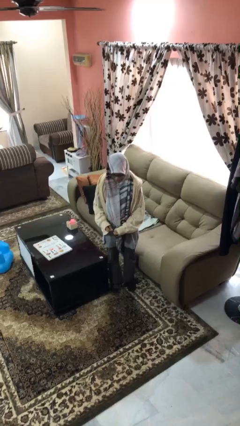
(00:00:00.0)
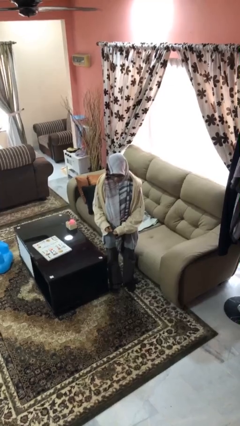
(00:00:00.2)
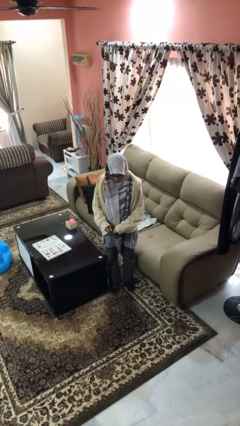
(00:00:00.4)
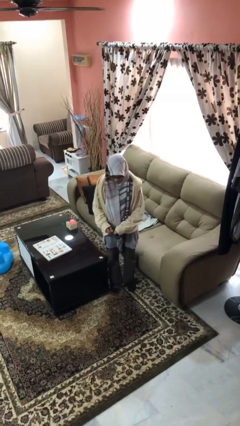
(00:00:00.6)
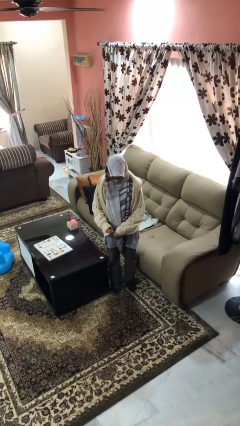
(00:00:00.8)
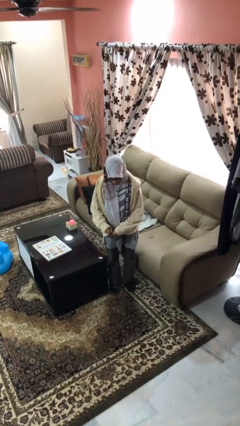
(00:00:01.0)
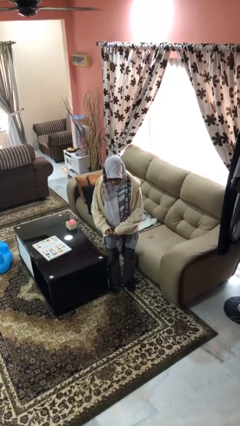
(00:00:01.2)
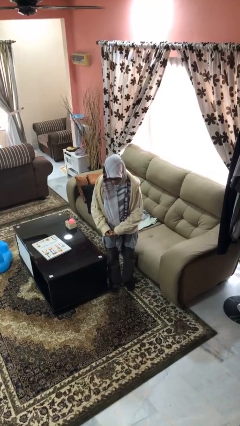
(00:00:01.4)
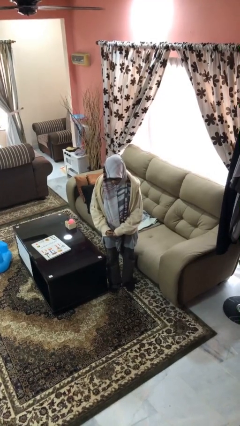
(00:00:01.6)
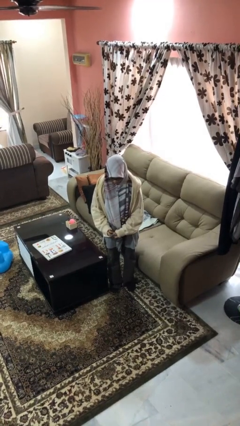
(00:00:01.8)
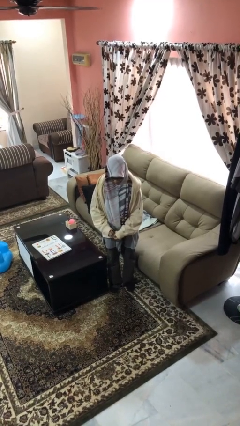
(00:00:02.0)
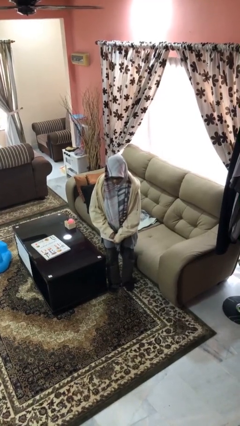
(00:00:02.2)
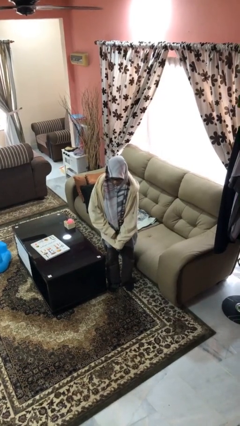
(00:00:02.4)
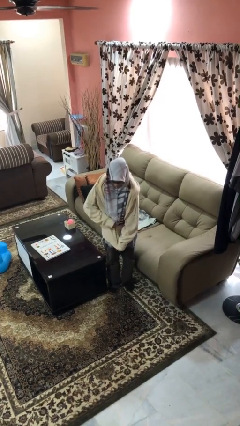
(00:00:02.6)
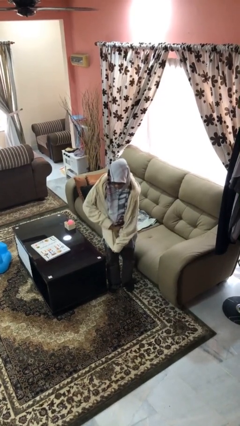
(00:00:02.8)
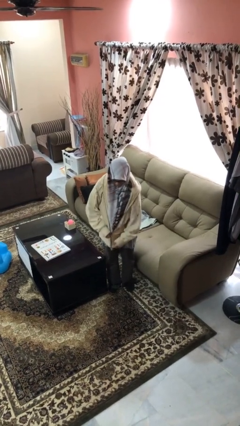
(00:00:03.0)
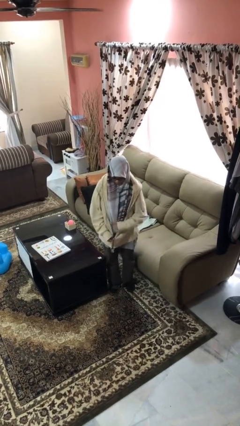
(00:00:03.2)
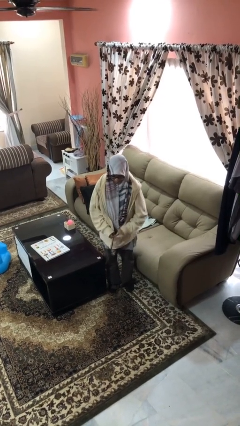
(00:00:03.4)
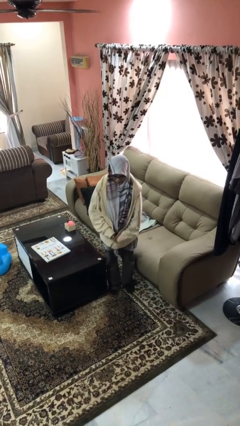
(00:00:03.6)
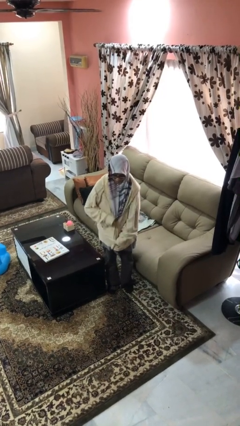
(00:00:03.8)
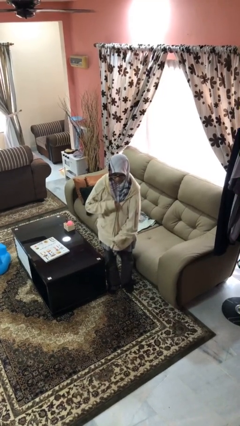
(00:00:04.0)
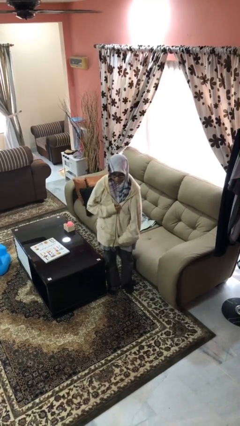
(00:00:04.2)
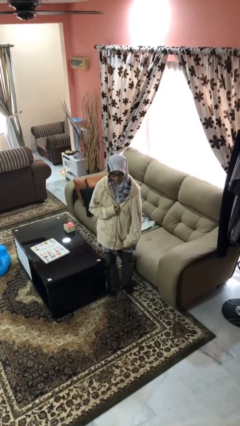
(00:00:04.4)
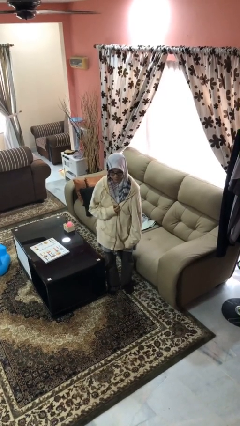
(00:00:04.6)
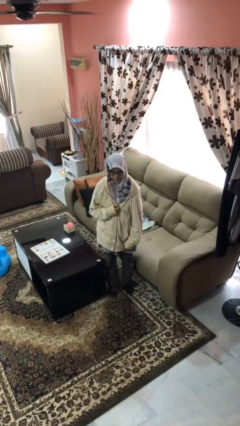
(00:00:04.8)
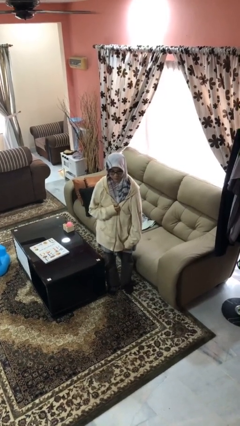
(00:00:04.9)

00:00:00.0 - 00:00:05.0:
person zips up jacket

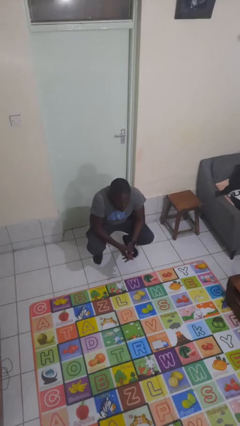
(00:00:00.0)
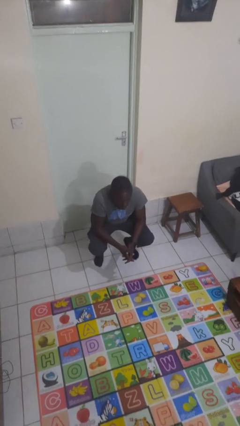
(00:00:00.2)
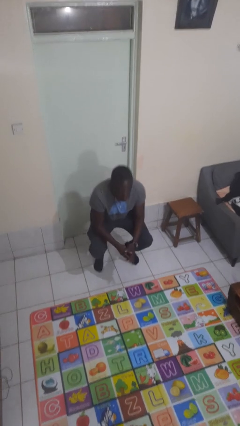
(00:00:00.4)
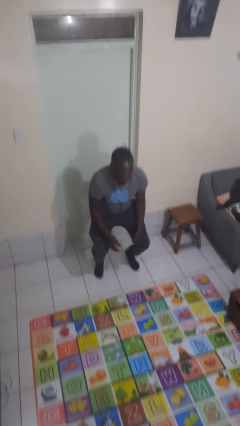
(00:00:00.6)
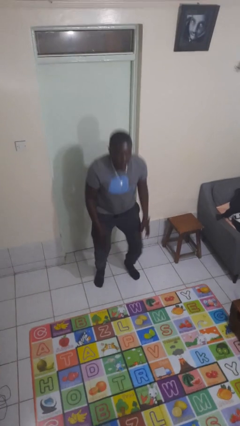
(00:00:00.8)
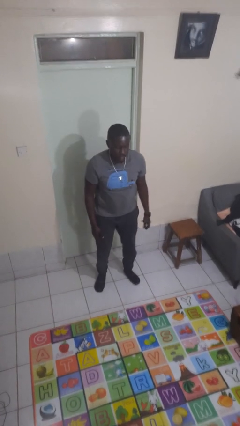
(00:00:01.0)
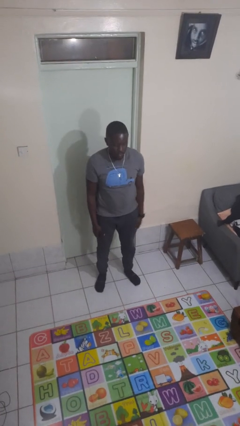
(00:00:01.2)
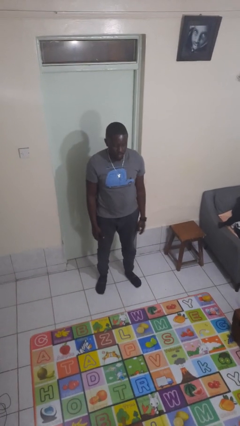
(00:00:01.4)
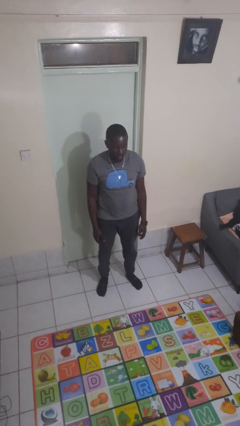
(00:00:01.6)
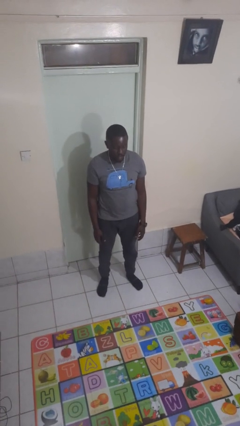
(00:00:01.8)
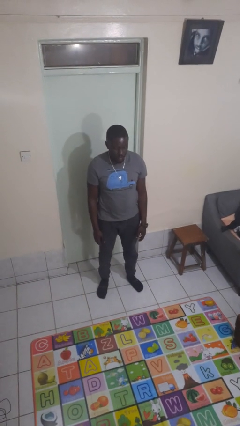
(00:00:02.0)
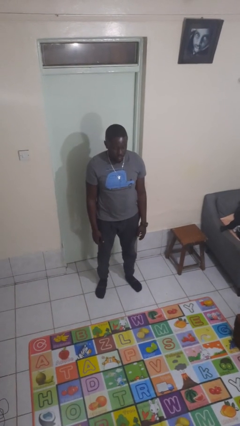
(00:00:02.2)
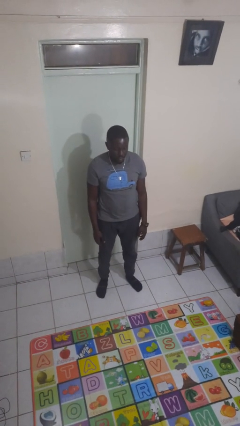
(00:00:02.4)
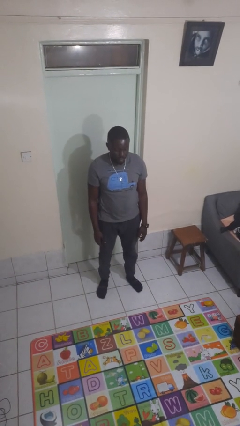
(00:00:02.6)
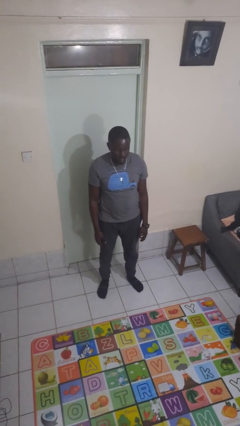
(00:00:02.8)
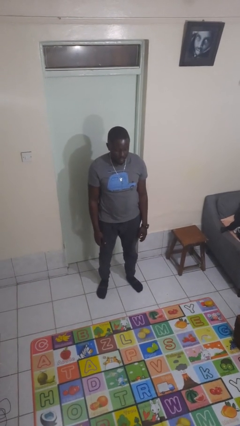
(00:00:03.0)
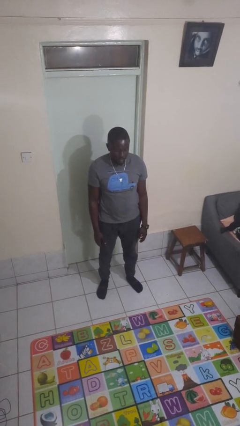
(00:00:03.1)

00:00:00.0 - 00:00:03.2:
person stands up

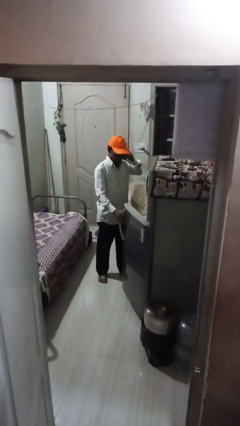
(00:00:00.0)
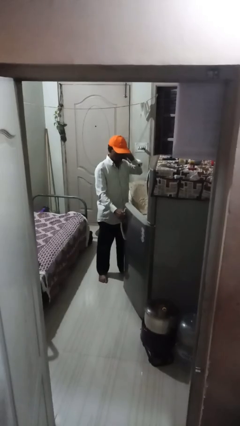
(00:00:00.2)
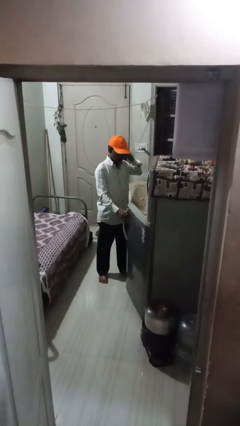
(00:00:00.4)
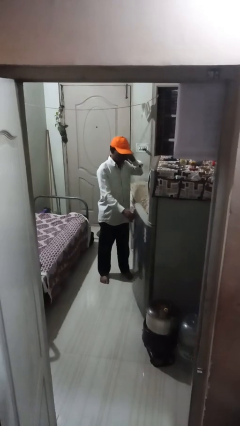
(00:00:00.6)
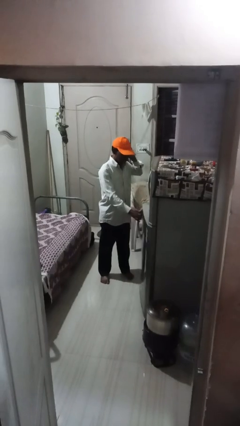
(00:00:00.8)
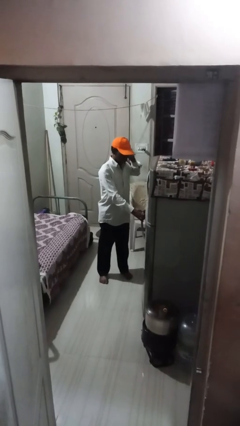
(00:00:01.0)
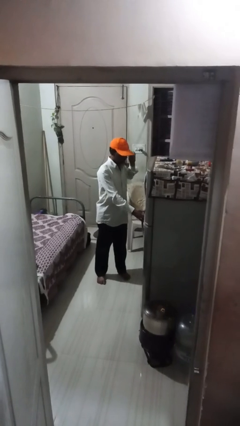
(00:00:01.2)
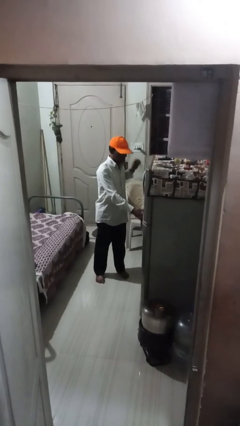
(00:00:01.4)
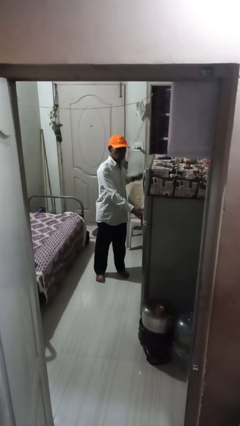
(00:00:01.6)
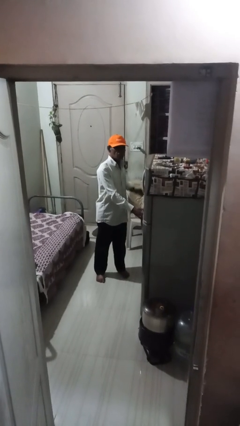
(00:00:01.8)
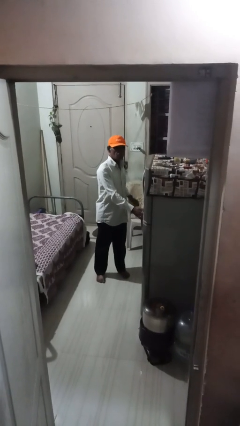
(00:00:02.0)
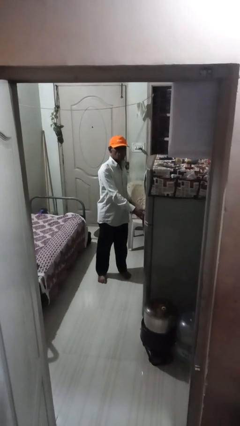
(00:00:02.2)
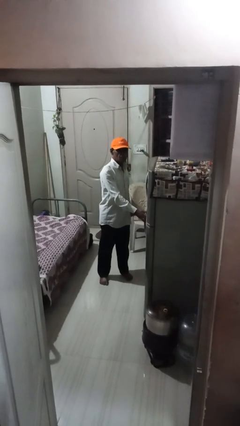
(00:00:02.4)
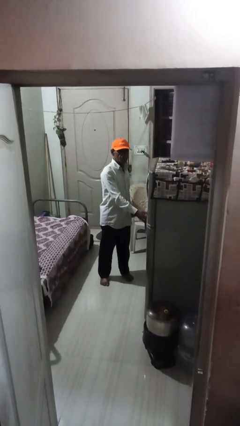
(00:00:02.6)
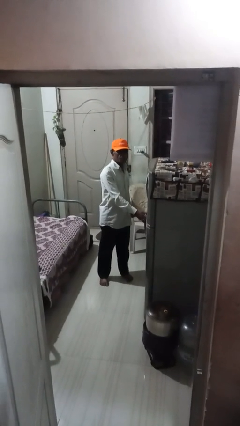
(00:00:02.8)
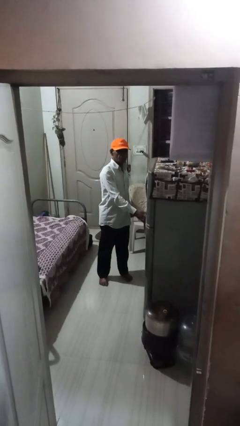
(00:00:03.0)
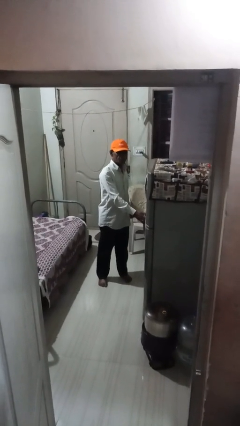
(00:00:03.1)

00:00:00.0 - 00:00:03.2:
person closes refrigerator

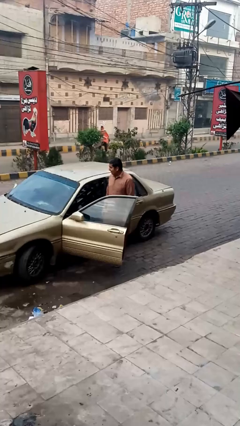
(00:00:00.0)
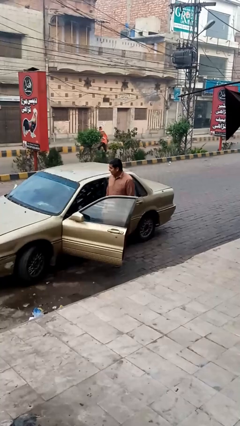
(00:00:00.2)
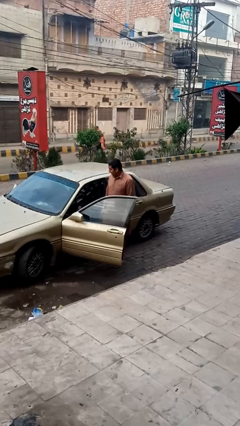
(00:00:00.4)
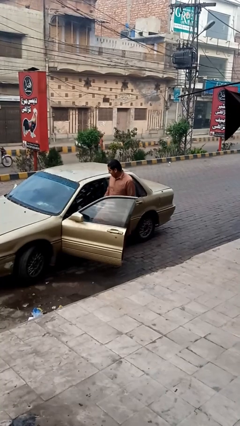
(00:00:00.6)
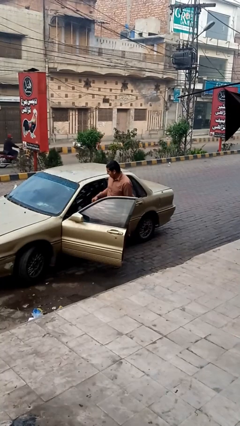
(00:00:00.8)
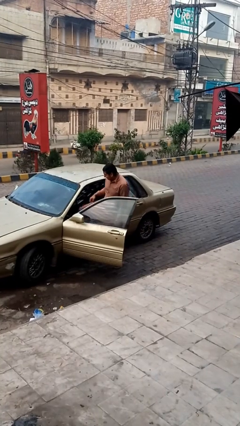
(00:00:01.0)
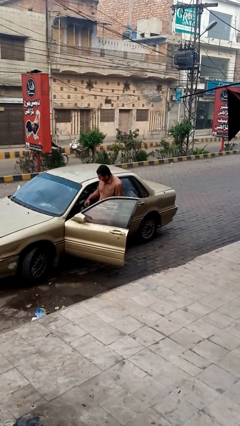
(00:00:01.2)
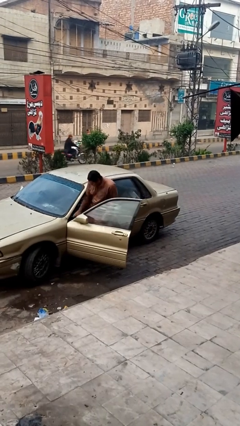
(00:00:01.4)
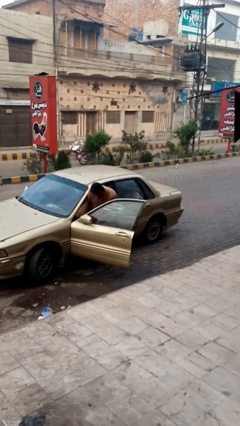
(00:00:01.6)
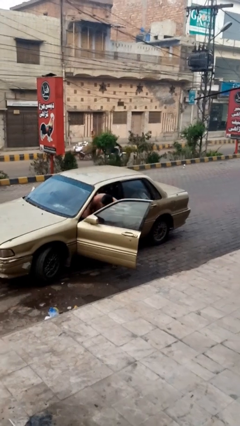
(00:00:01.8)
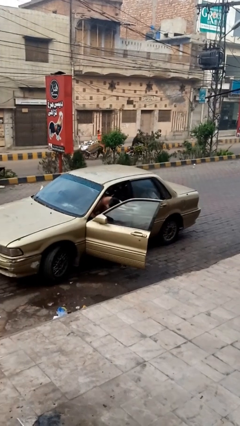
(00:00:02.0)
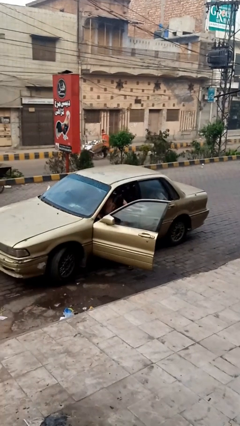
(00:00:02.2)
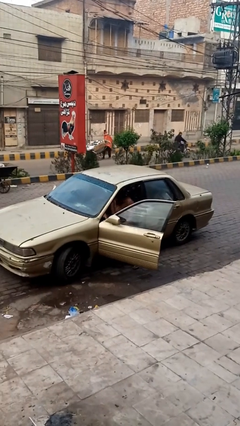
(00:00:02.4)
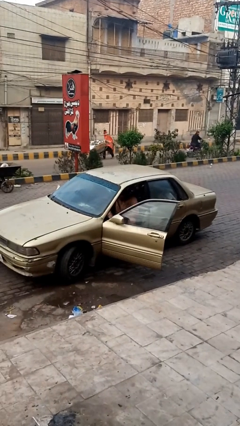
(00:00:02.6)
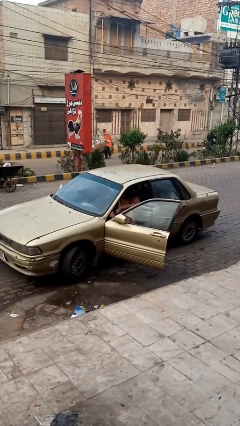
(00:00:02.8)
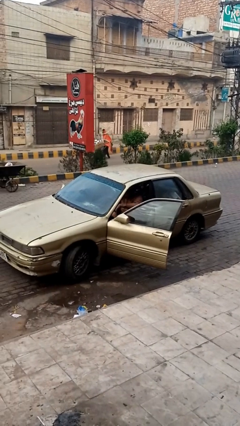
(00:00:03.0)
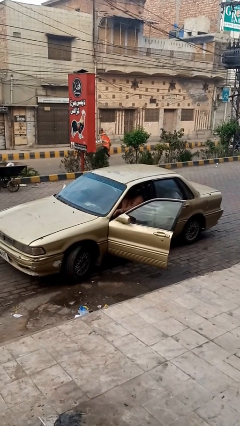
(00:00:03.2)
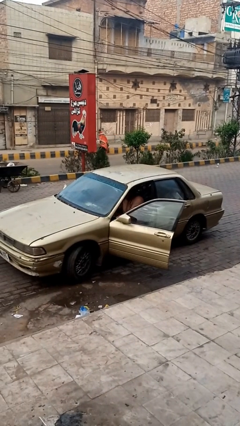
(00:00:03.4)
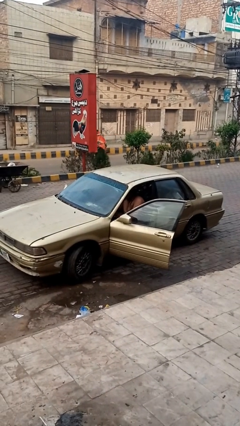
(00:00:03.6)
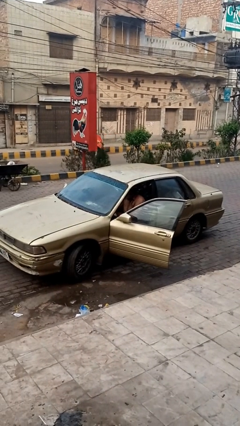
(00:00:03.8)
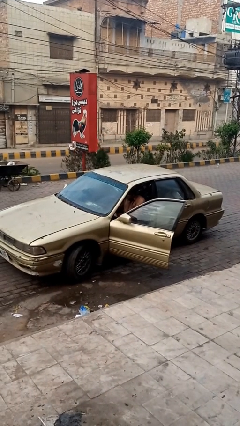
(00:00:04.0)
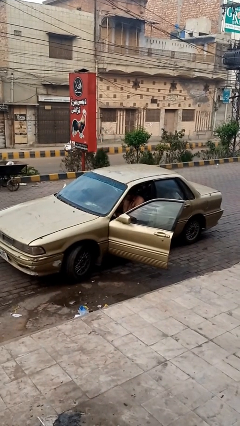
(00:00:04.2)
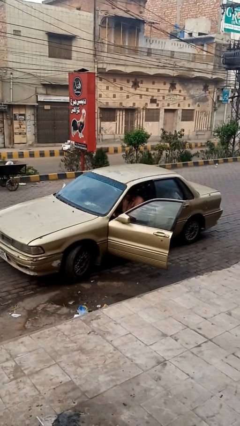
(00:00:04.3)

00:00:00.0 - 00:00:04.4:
person enters car

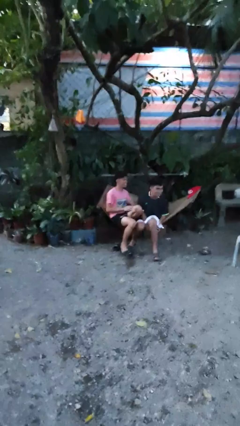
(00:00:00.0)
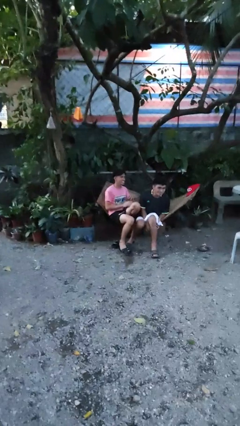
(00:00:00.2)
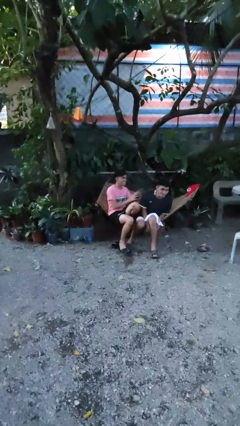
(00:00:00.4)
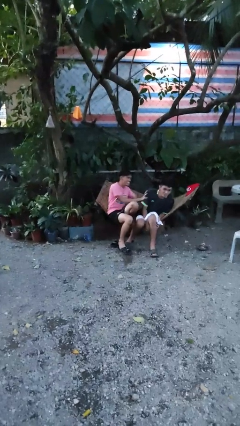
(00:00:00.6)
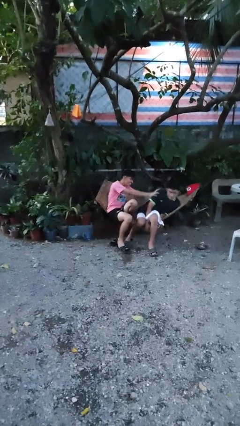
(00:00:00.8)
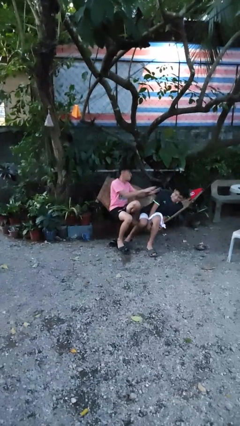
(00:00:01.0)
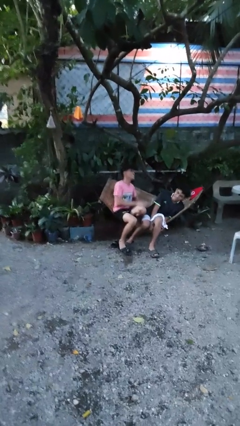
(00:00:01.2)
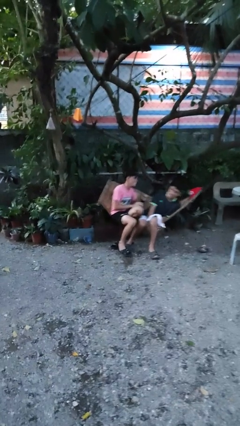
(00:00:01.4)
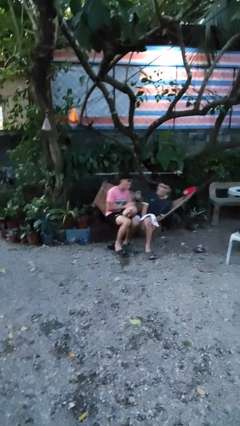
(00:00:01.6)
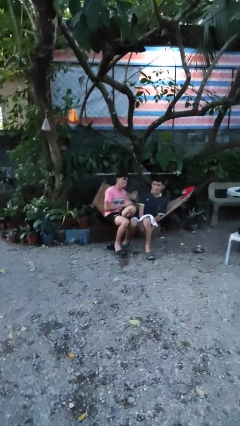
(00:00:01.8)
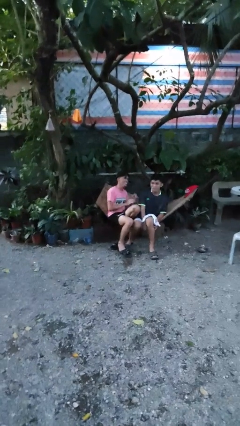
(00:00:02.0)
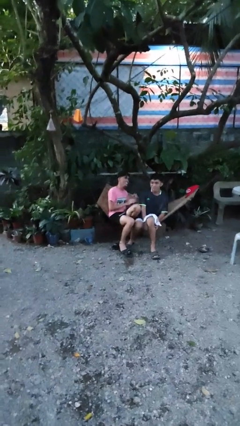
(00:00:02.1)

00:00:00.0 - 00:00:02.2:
person shoves person
